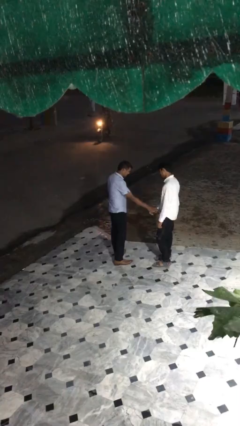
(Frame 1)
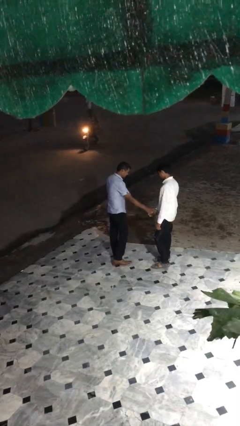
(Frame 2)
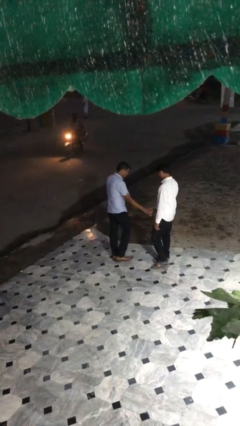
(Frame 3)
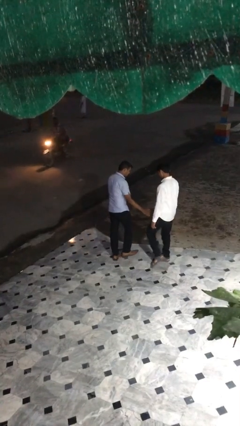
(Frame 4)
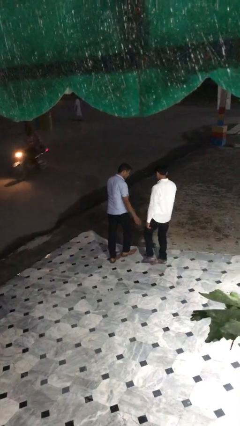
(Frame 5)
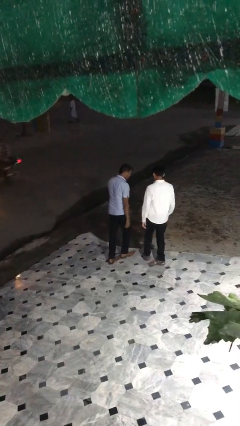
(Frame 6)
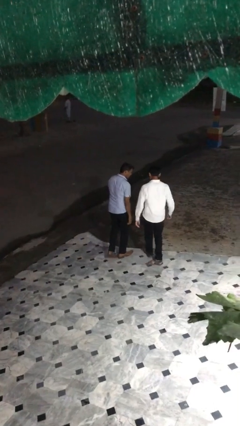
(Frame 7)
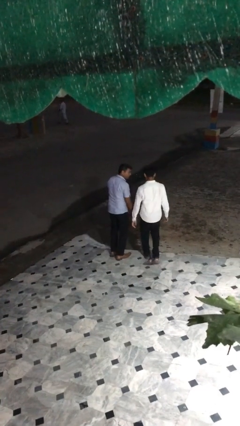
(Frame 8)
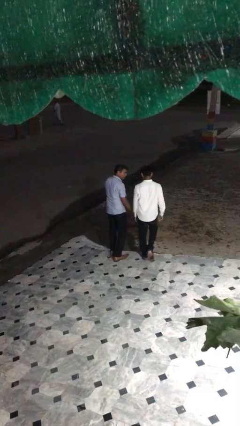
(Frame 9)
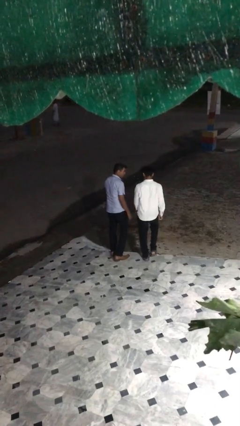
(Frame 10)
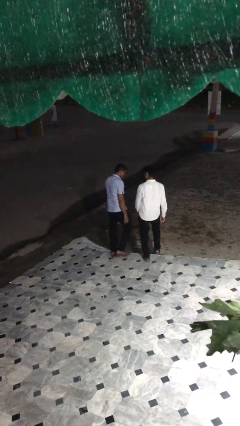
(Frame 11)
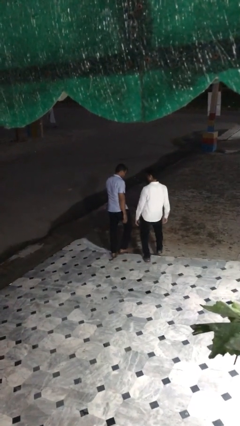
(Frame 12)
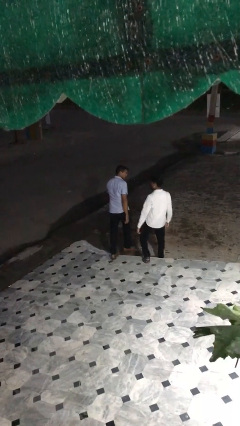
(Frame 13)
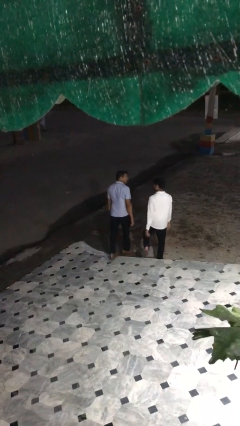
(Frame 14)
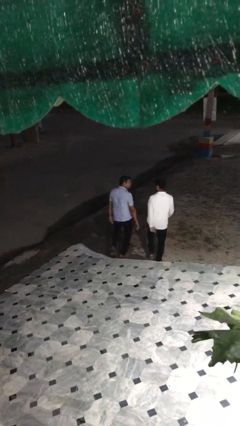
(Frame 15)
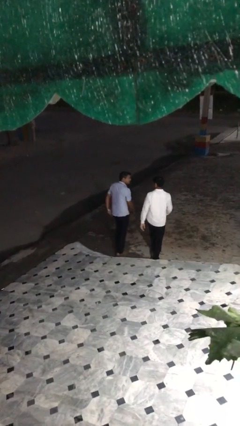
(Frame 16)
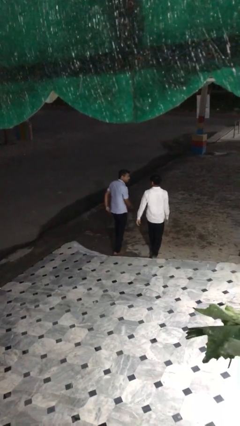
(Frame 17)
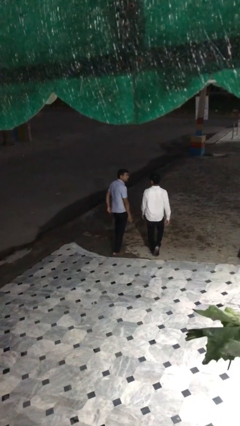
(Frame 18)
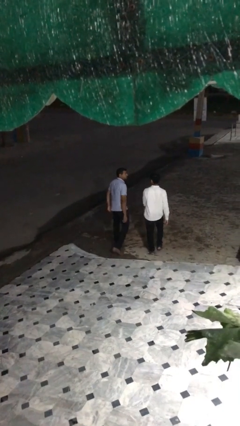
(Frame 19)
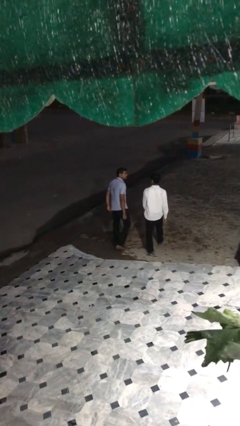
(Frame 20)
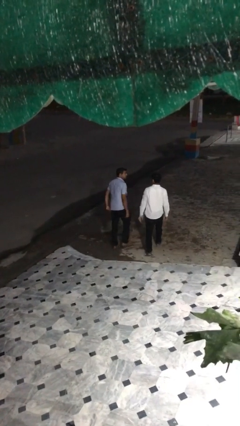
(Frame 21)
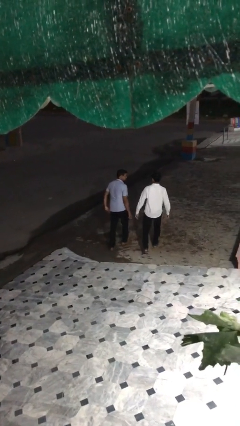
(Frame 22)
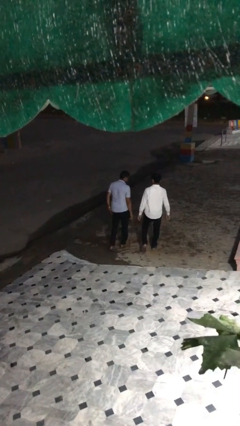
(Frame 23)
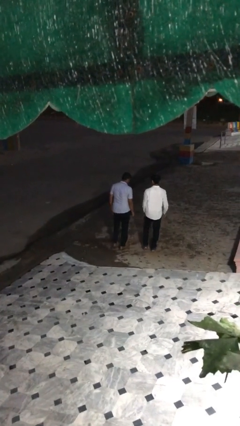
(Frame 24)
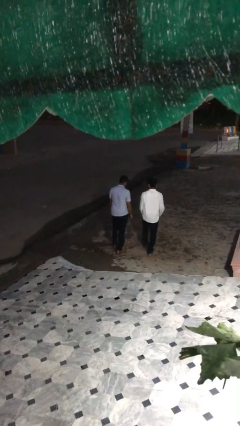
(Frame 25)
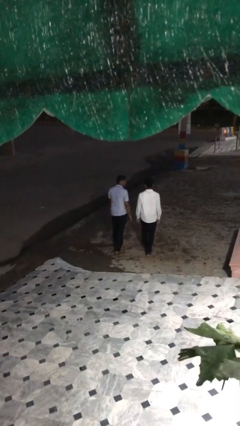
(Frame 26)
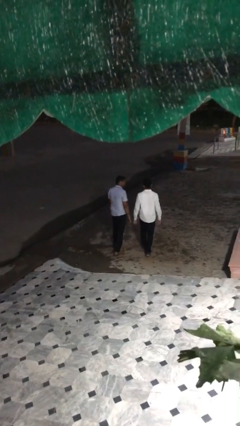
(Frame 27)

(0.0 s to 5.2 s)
person talks to person

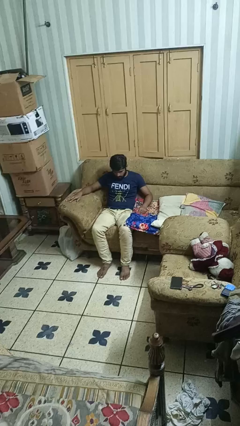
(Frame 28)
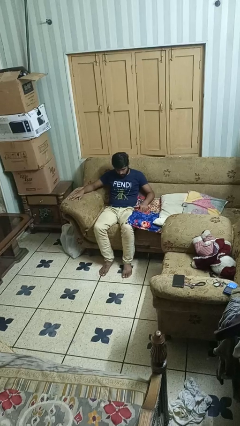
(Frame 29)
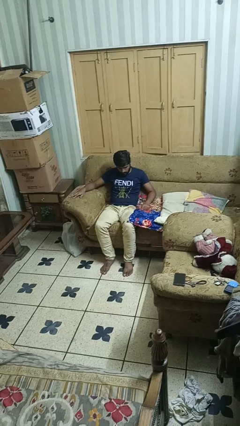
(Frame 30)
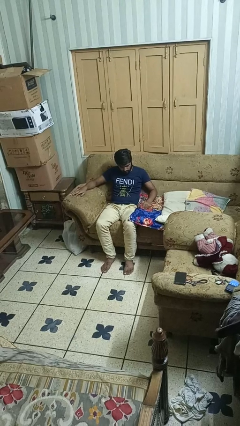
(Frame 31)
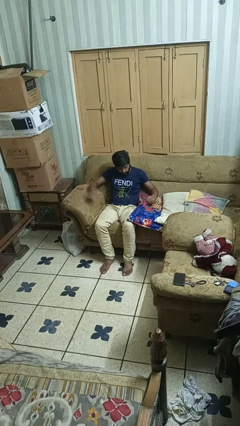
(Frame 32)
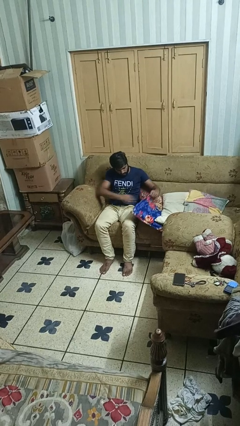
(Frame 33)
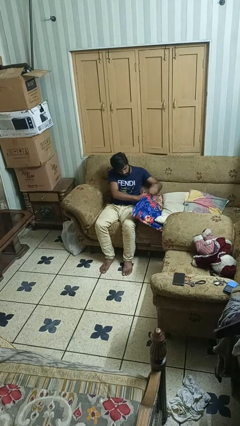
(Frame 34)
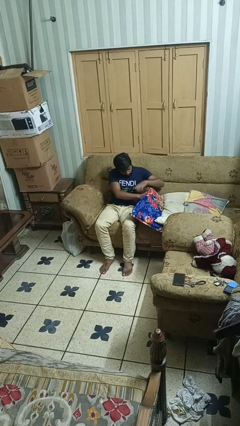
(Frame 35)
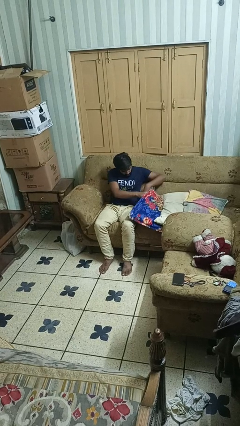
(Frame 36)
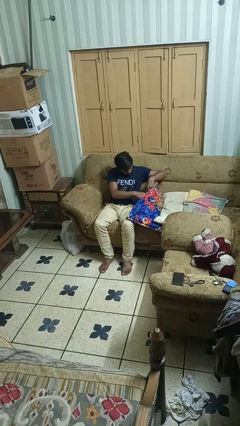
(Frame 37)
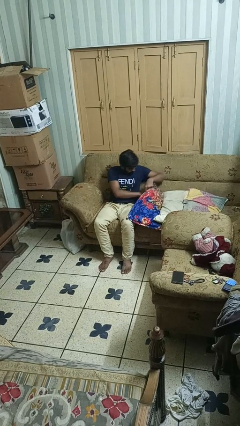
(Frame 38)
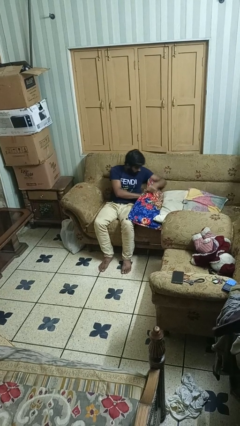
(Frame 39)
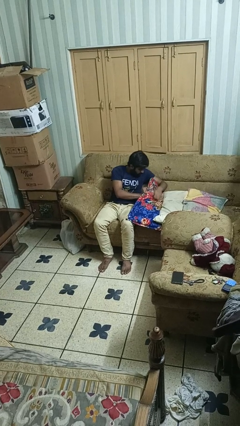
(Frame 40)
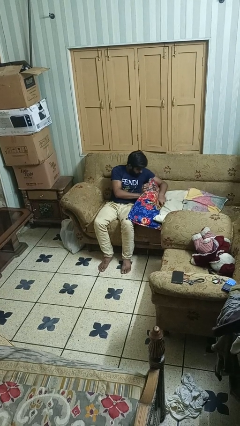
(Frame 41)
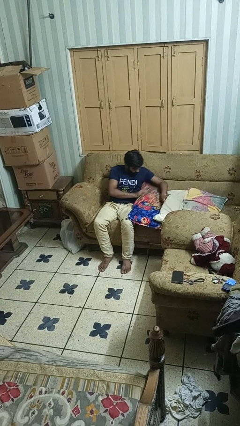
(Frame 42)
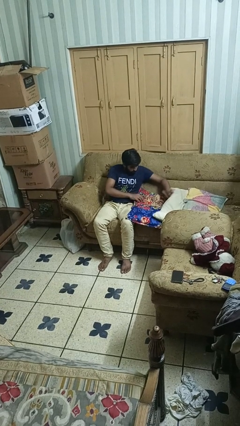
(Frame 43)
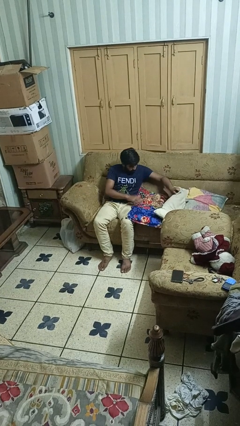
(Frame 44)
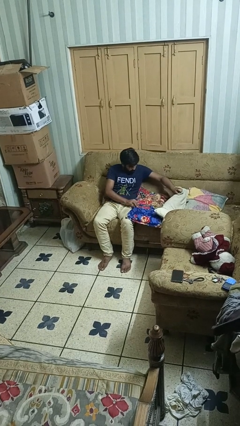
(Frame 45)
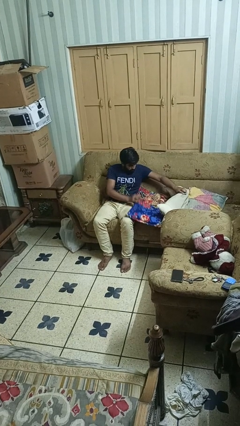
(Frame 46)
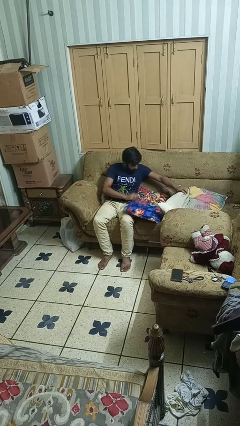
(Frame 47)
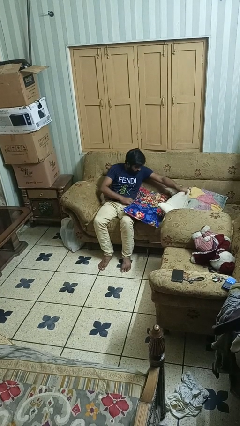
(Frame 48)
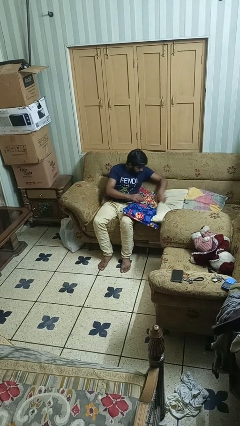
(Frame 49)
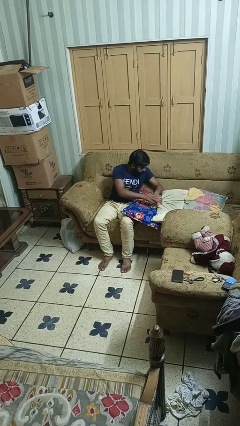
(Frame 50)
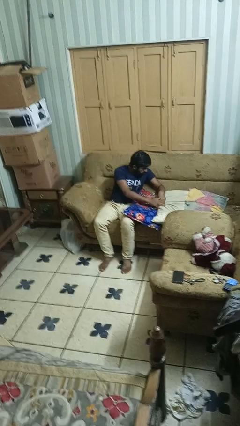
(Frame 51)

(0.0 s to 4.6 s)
person searches in couch

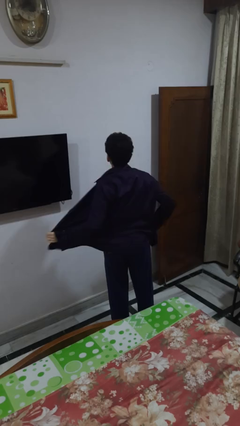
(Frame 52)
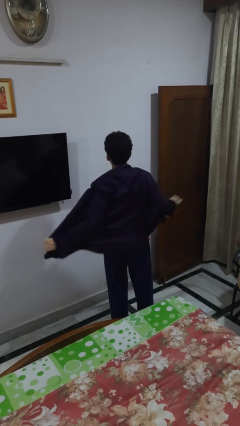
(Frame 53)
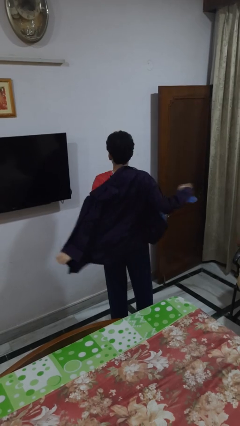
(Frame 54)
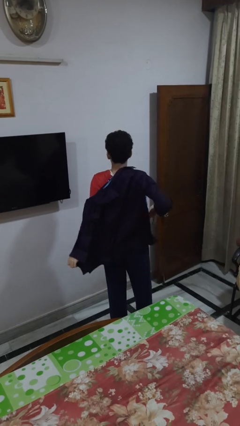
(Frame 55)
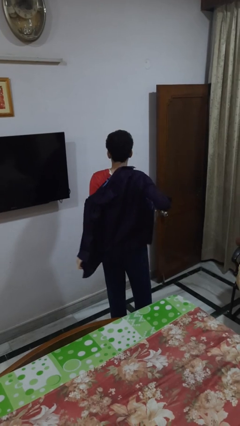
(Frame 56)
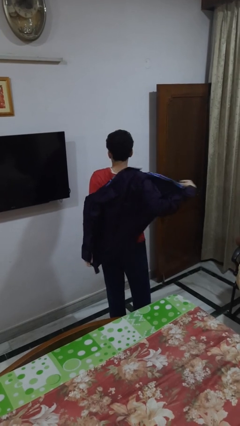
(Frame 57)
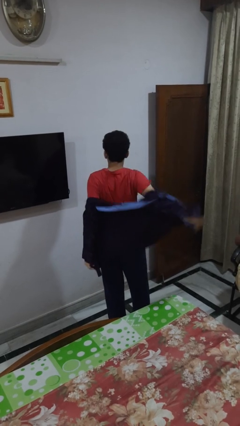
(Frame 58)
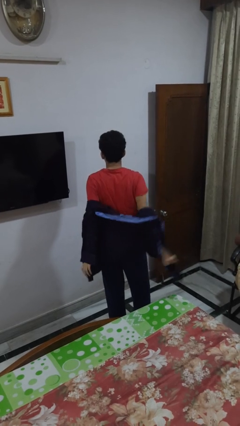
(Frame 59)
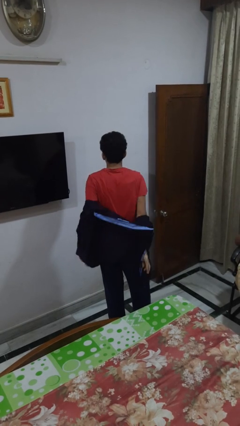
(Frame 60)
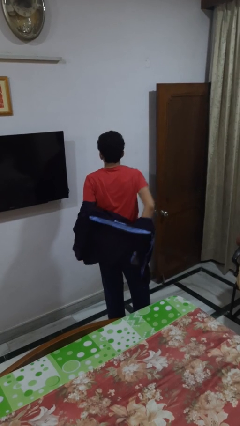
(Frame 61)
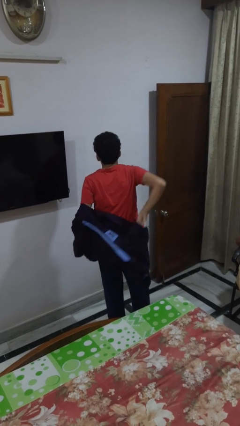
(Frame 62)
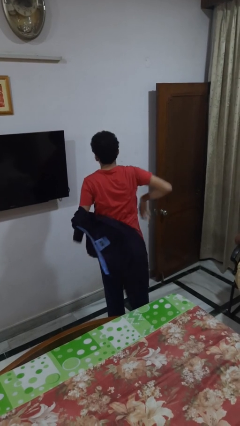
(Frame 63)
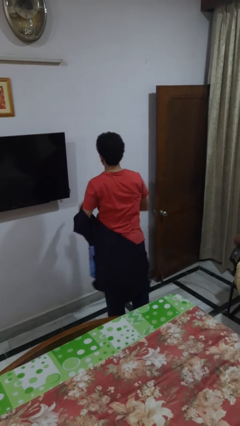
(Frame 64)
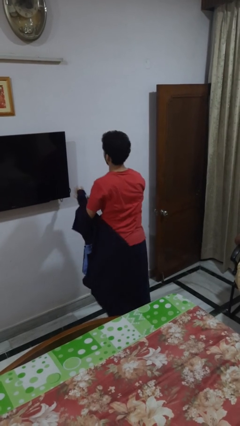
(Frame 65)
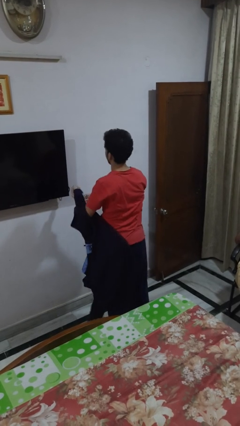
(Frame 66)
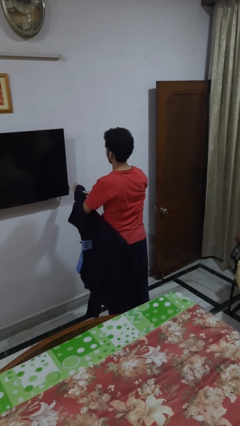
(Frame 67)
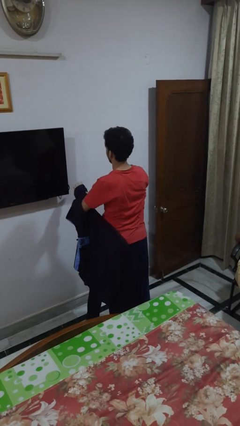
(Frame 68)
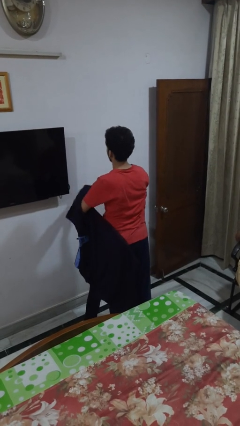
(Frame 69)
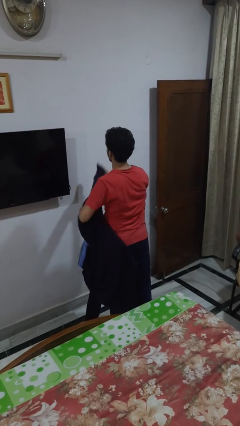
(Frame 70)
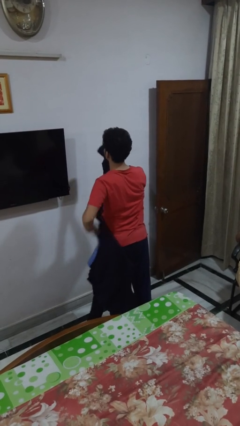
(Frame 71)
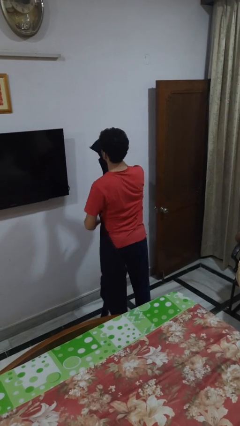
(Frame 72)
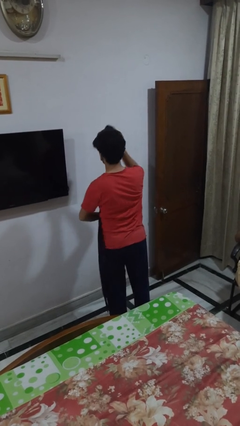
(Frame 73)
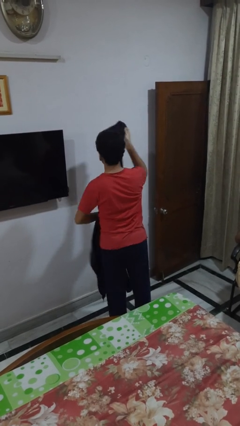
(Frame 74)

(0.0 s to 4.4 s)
person takes off shirt

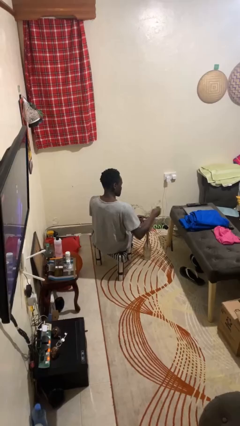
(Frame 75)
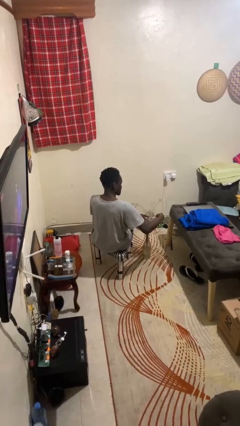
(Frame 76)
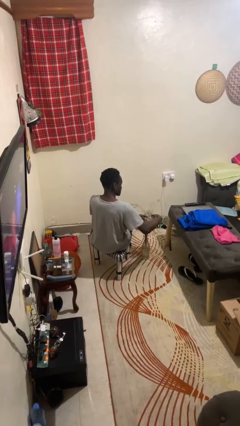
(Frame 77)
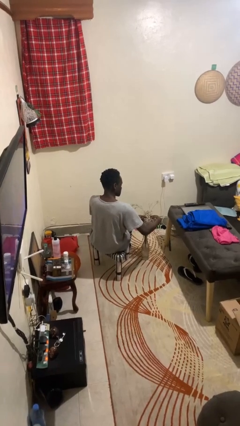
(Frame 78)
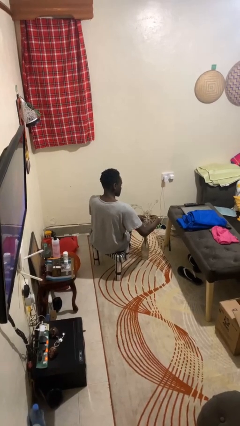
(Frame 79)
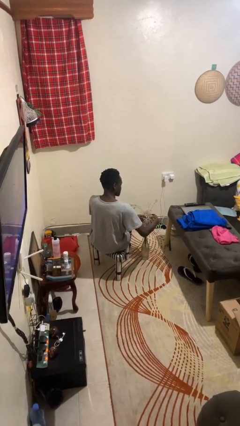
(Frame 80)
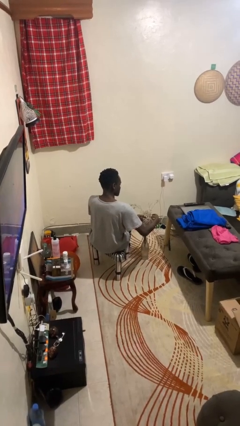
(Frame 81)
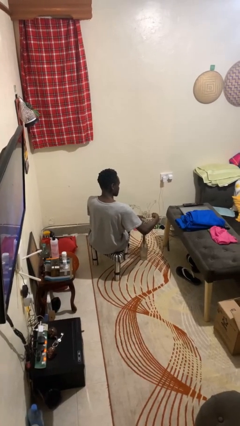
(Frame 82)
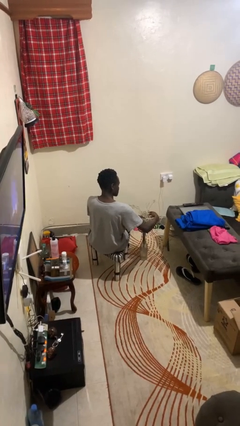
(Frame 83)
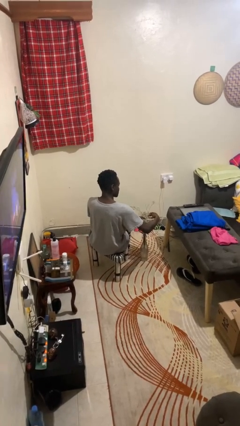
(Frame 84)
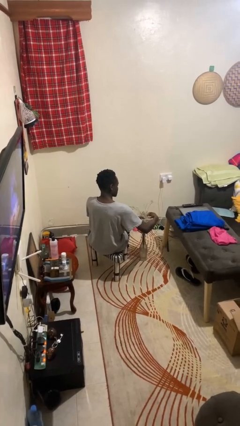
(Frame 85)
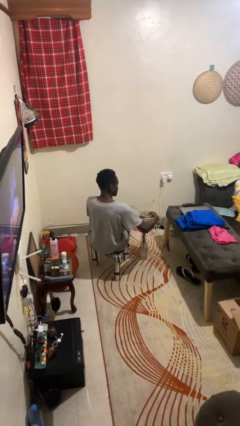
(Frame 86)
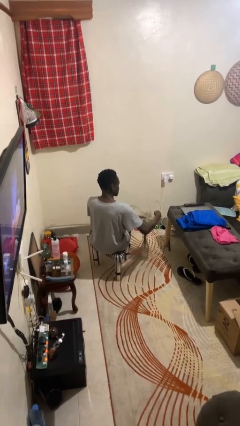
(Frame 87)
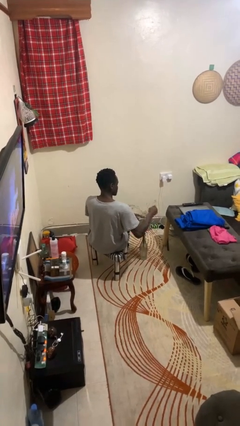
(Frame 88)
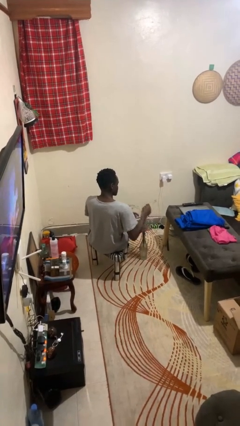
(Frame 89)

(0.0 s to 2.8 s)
person arranges flowers in vase

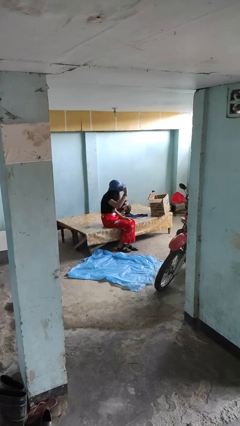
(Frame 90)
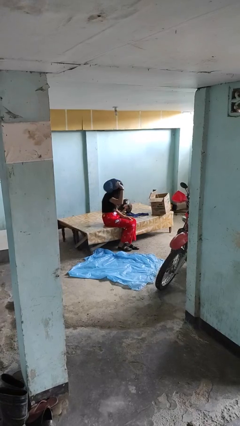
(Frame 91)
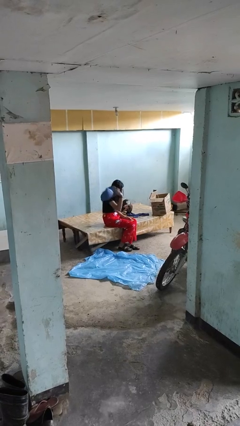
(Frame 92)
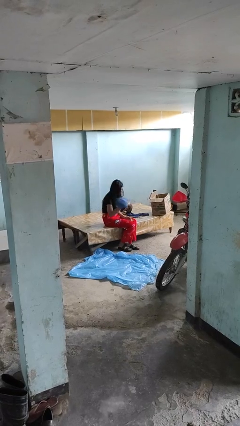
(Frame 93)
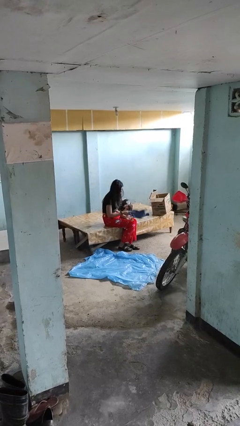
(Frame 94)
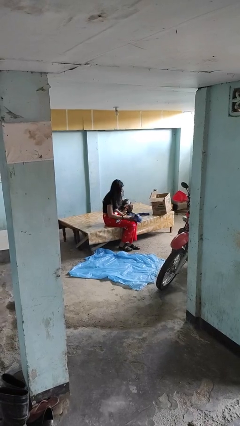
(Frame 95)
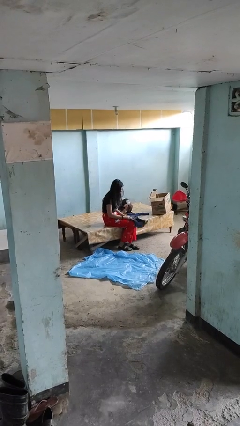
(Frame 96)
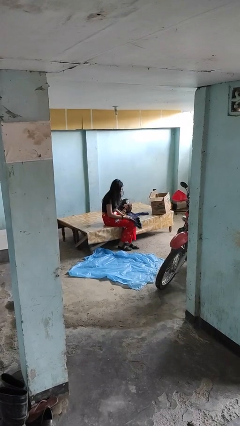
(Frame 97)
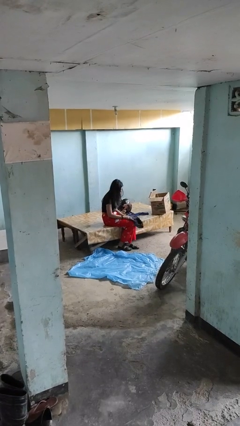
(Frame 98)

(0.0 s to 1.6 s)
person takes off hat
